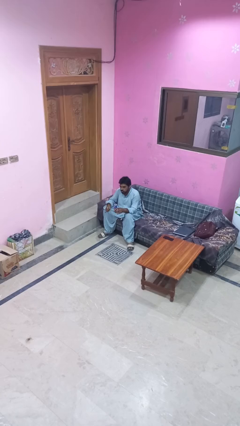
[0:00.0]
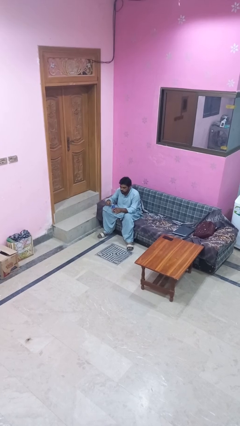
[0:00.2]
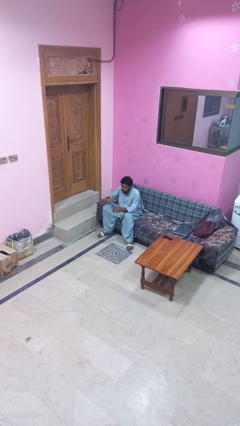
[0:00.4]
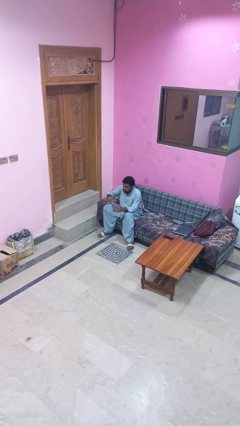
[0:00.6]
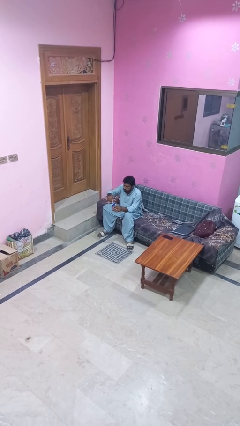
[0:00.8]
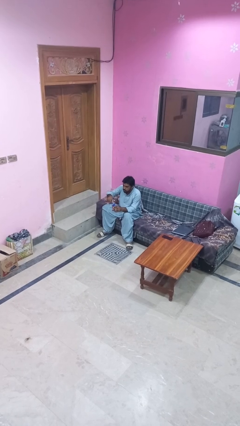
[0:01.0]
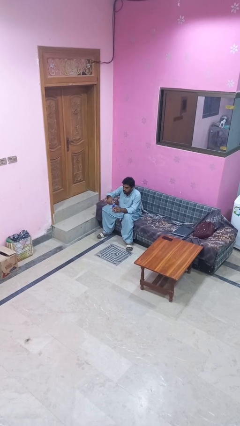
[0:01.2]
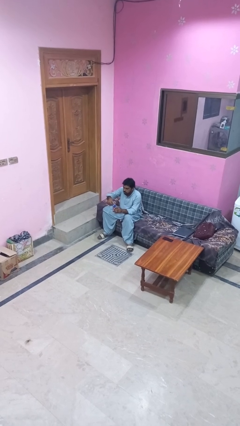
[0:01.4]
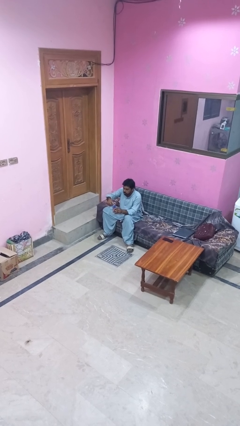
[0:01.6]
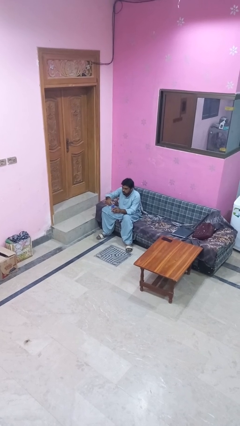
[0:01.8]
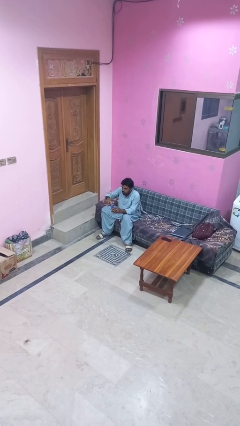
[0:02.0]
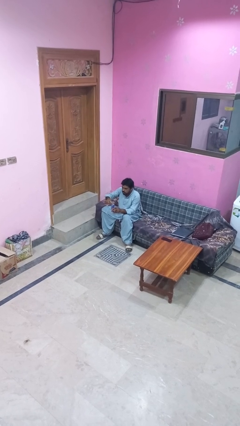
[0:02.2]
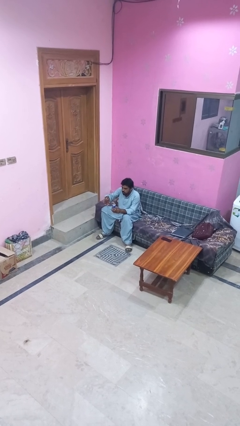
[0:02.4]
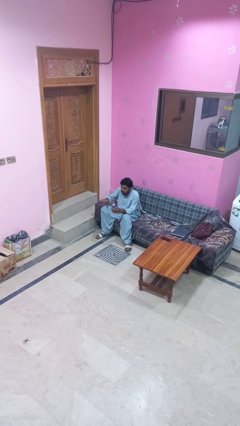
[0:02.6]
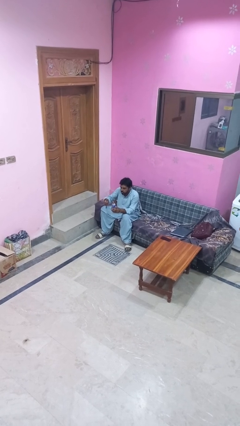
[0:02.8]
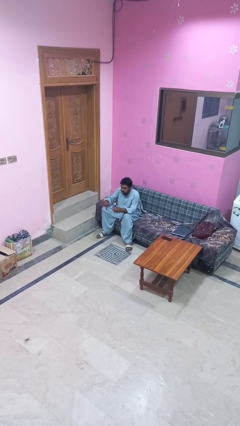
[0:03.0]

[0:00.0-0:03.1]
person opens can with can opener

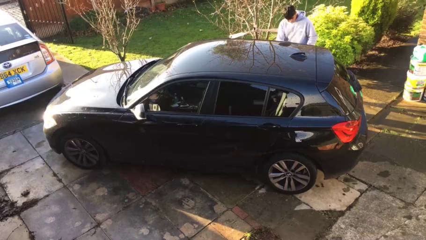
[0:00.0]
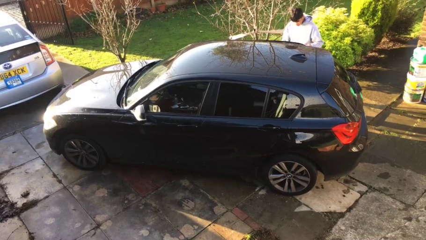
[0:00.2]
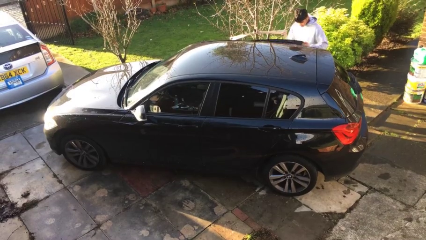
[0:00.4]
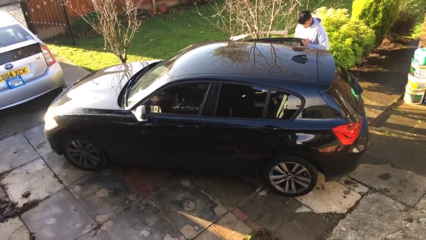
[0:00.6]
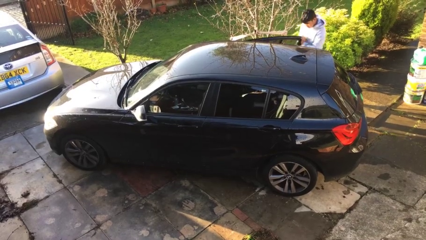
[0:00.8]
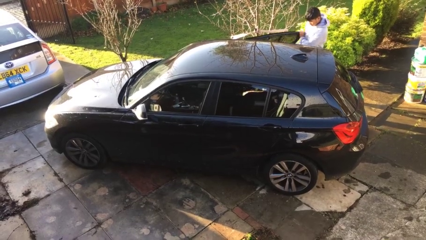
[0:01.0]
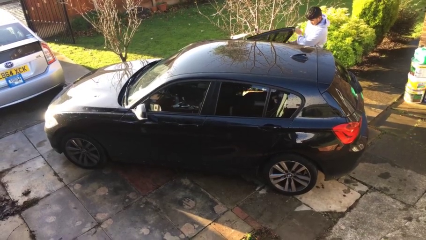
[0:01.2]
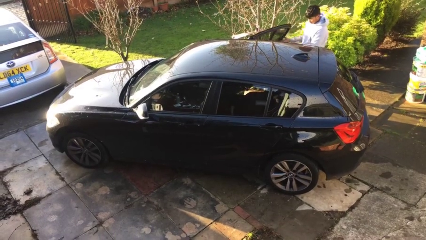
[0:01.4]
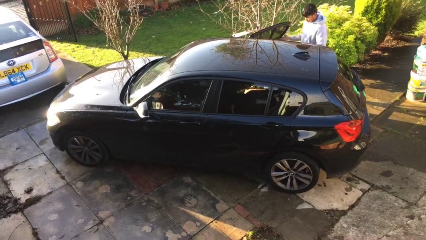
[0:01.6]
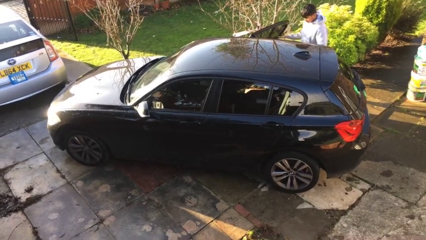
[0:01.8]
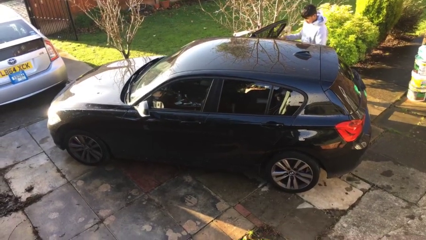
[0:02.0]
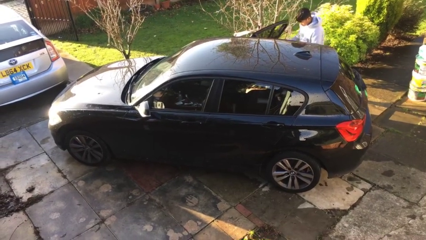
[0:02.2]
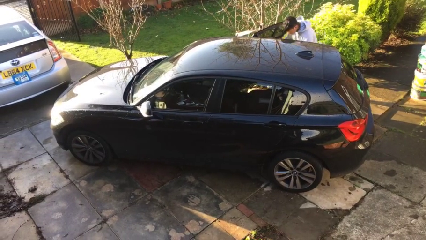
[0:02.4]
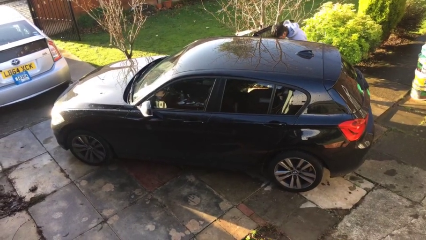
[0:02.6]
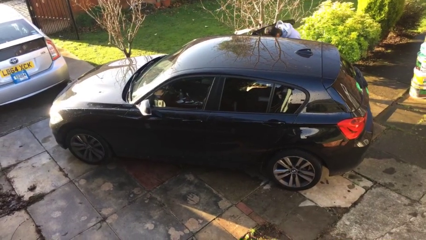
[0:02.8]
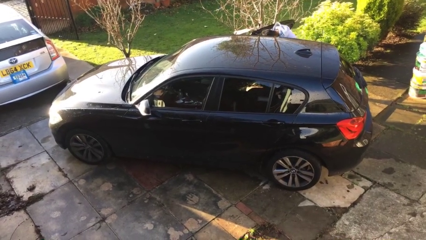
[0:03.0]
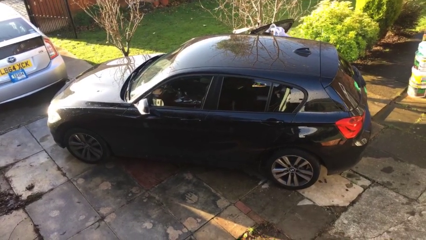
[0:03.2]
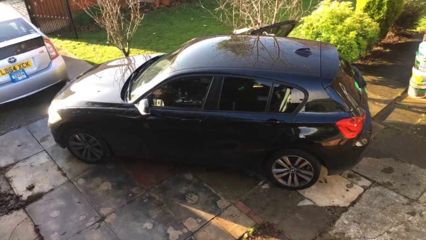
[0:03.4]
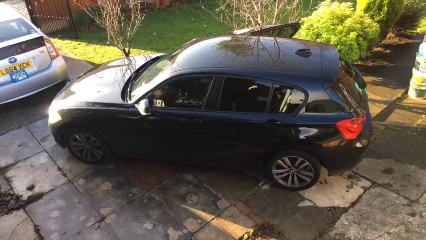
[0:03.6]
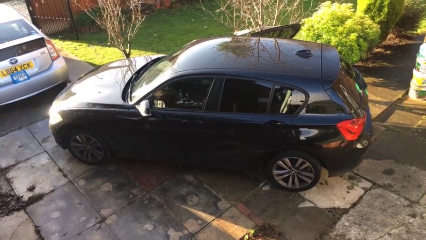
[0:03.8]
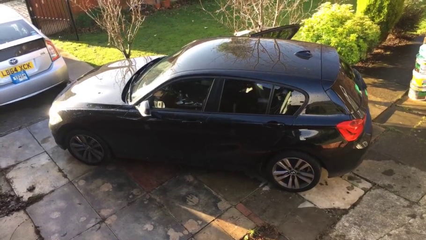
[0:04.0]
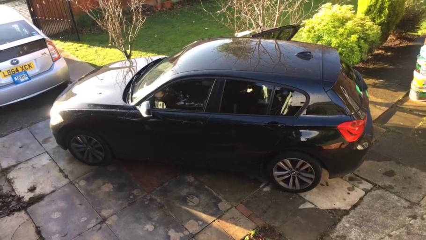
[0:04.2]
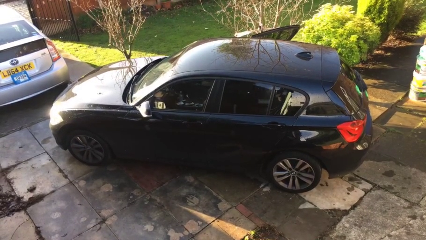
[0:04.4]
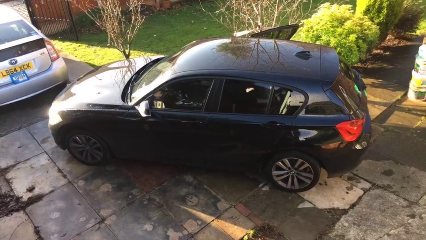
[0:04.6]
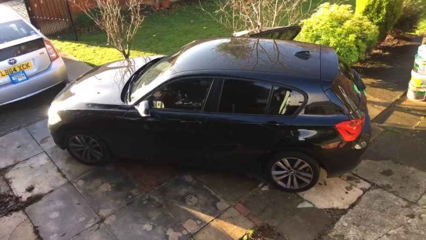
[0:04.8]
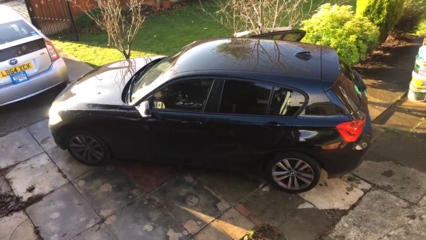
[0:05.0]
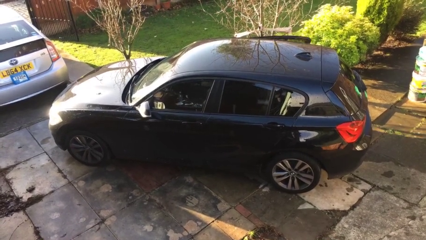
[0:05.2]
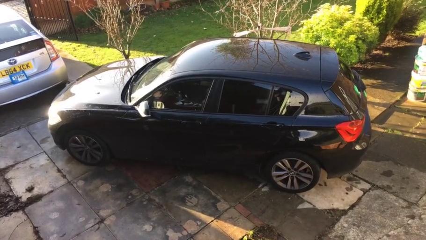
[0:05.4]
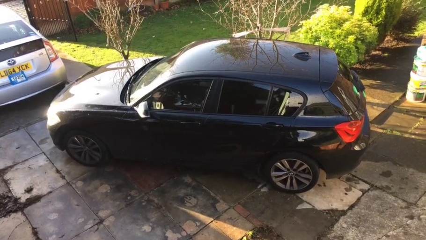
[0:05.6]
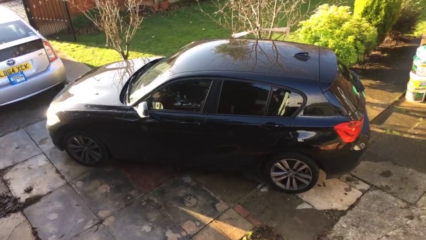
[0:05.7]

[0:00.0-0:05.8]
car picks up person

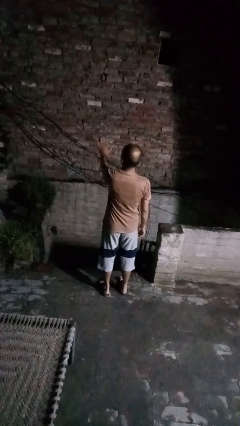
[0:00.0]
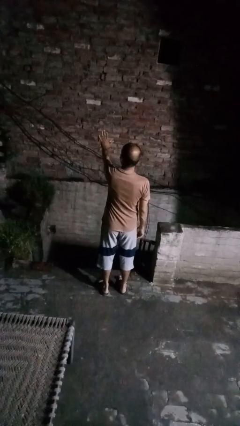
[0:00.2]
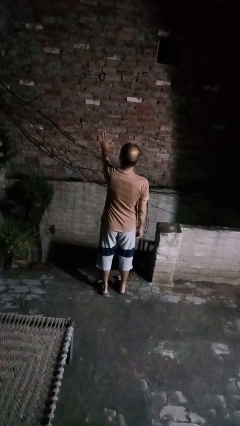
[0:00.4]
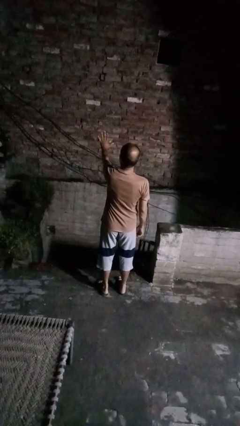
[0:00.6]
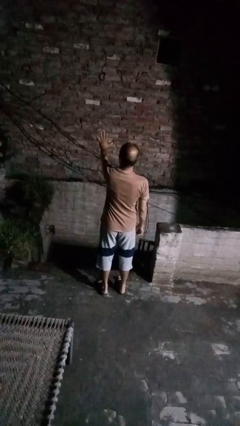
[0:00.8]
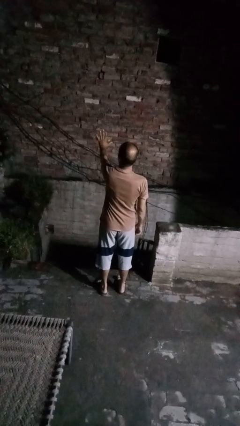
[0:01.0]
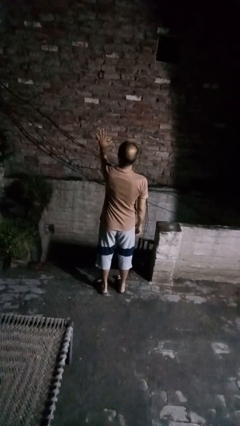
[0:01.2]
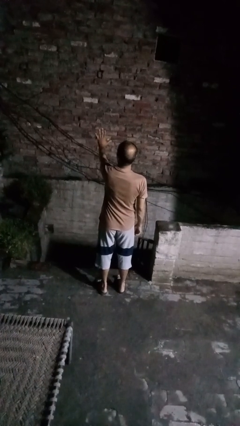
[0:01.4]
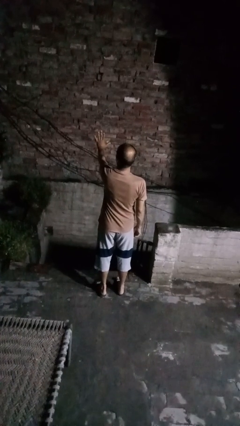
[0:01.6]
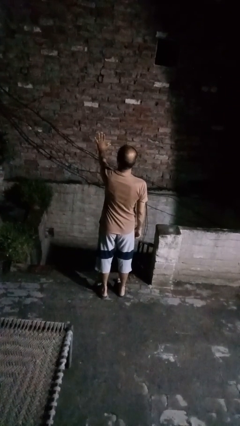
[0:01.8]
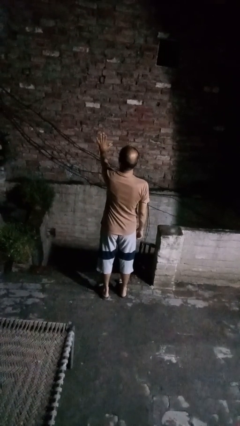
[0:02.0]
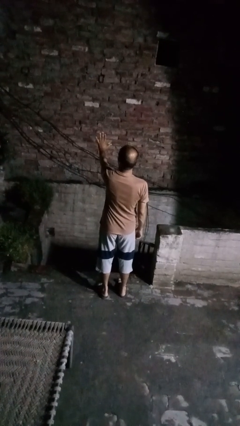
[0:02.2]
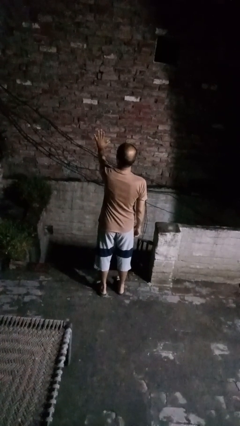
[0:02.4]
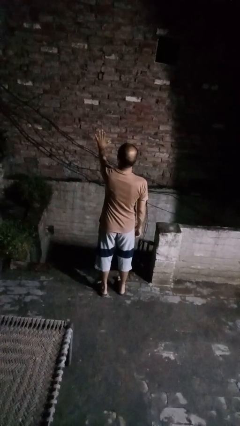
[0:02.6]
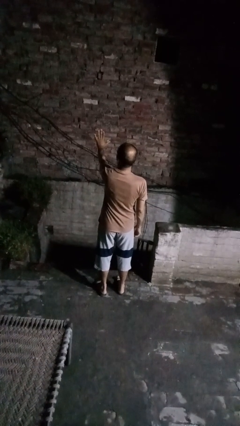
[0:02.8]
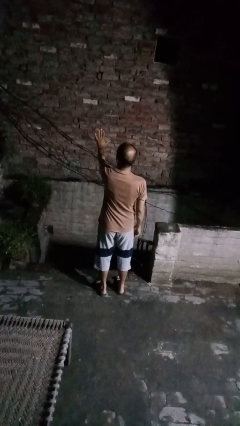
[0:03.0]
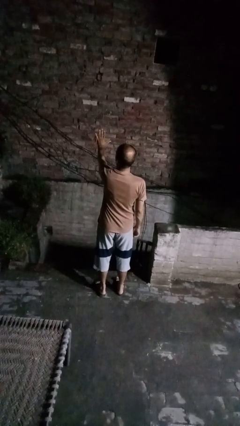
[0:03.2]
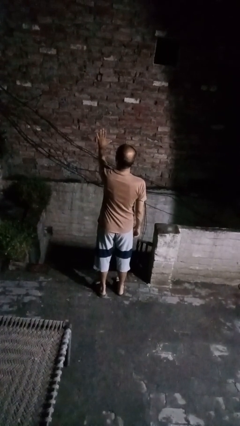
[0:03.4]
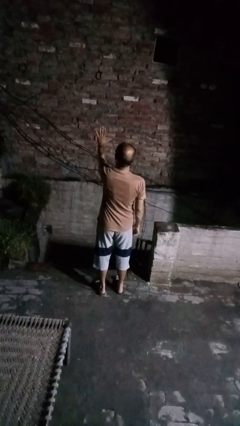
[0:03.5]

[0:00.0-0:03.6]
person gestures stop

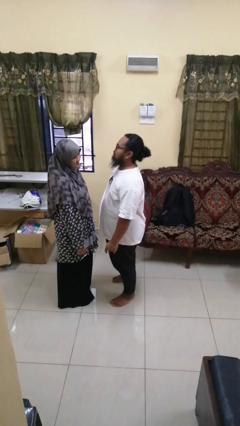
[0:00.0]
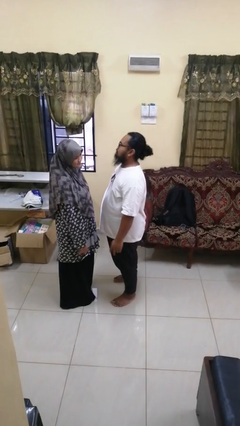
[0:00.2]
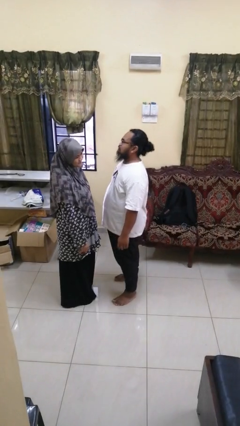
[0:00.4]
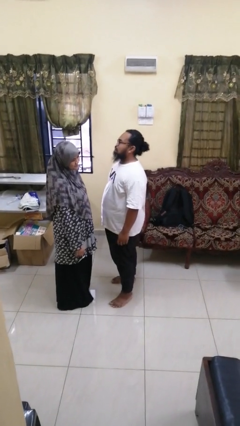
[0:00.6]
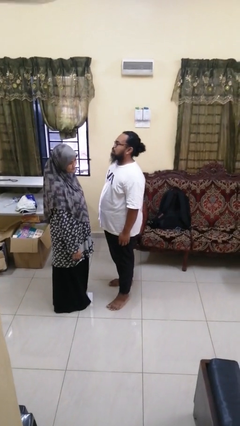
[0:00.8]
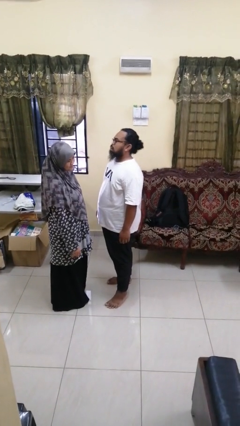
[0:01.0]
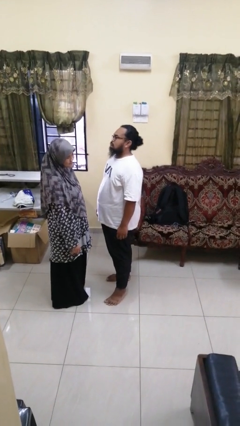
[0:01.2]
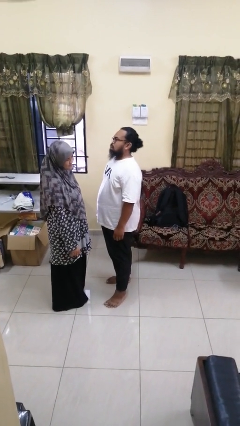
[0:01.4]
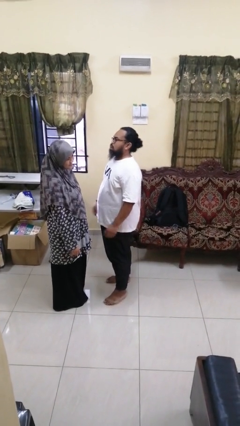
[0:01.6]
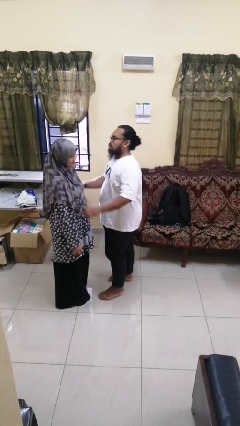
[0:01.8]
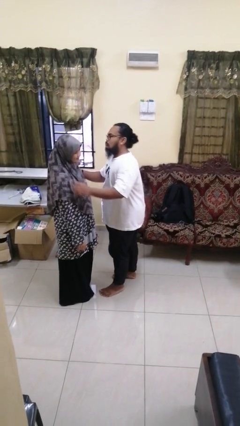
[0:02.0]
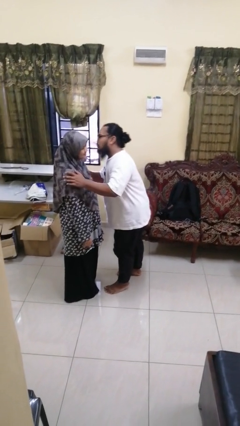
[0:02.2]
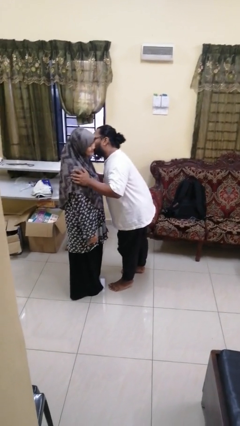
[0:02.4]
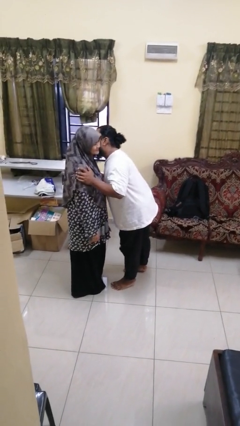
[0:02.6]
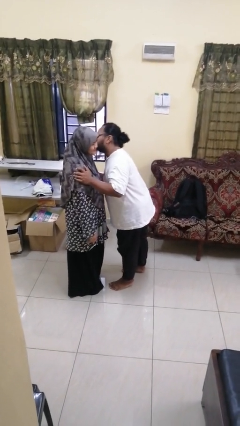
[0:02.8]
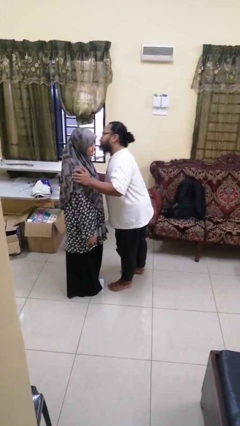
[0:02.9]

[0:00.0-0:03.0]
person kisses cheek of person

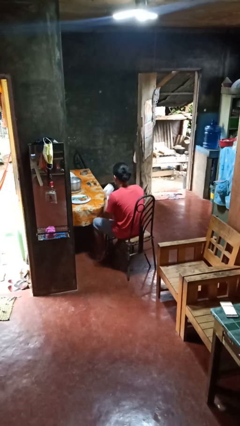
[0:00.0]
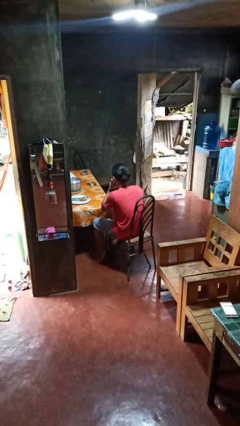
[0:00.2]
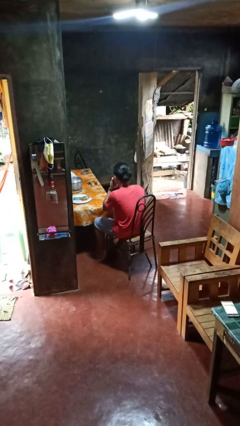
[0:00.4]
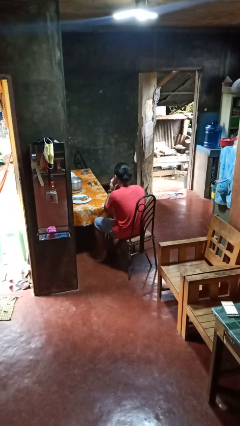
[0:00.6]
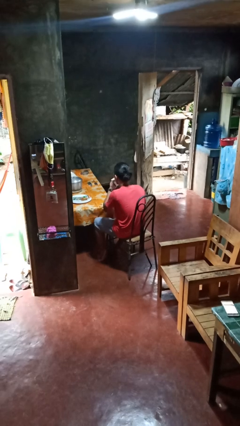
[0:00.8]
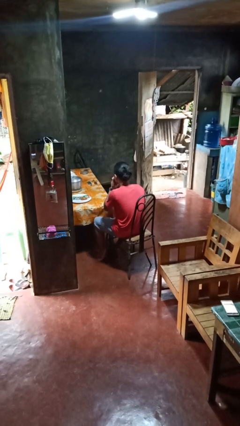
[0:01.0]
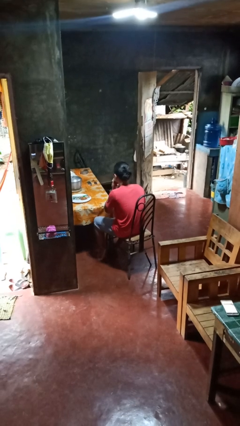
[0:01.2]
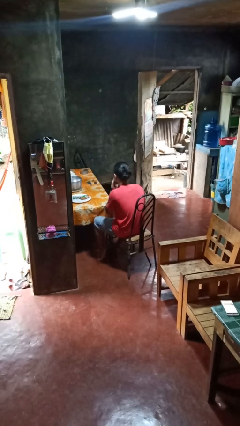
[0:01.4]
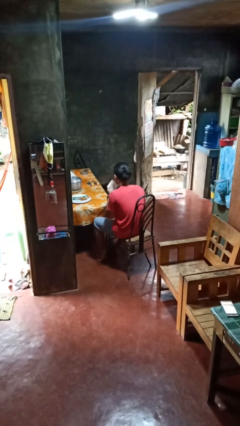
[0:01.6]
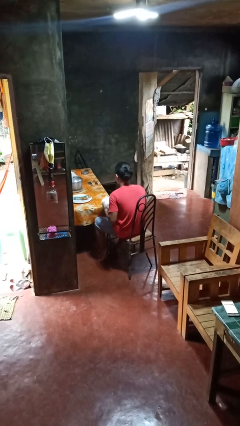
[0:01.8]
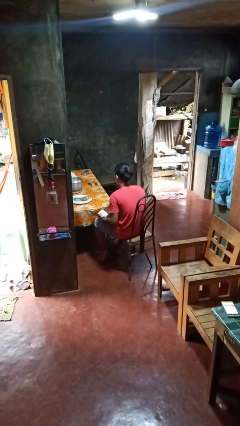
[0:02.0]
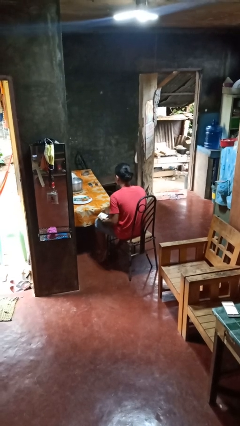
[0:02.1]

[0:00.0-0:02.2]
person wipes mouth with napkin

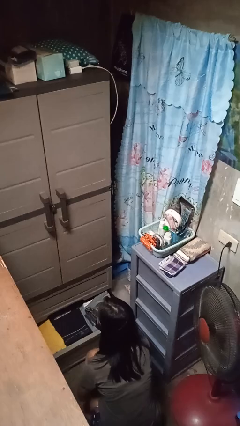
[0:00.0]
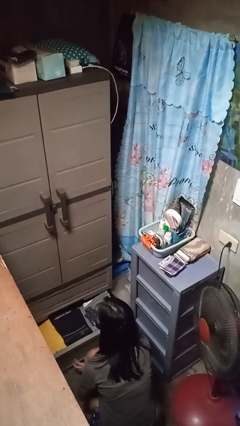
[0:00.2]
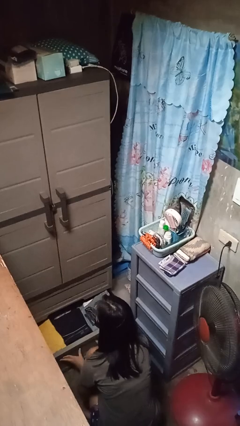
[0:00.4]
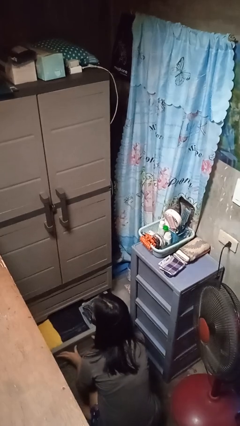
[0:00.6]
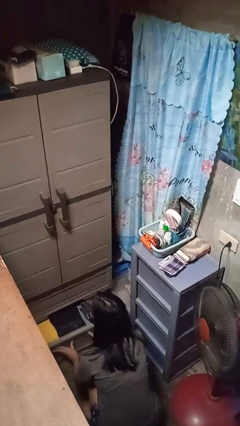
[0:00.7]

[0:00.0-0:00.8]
person closes dresser drawer
